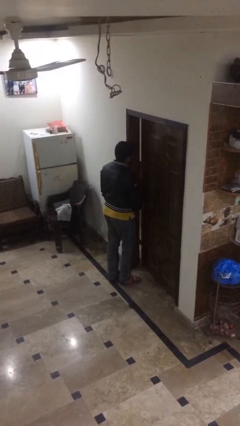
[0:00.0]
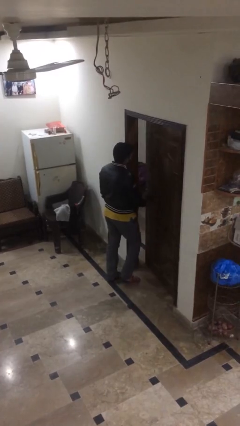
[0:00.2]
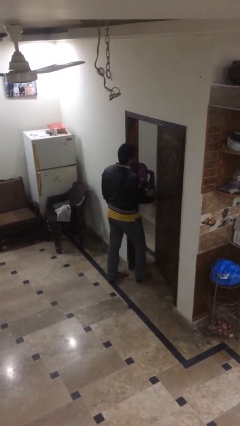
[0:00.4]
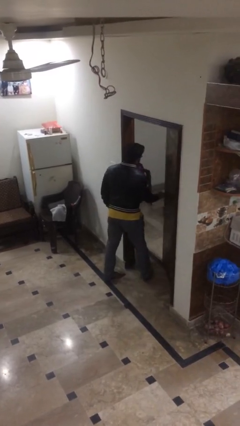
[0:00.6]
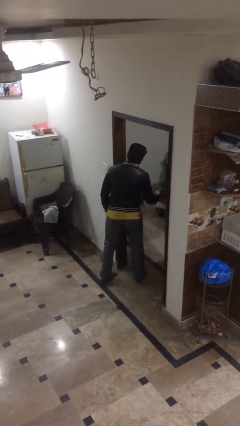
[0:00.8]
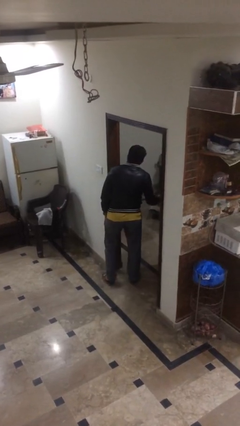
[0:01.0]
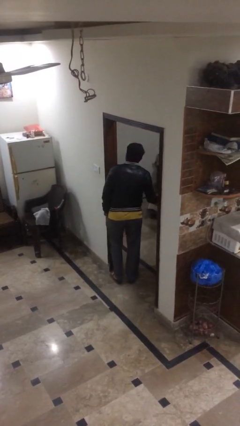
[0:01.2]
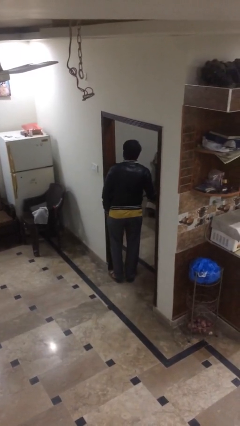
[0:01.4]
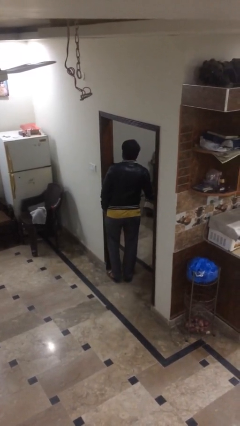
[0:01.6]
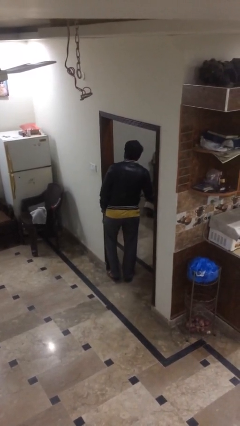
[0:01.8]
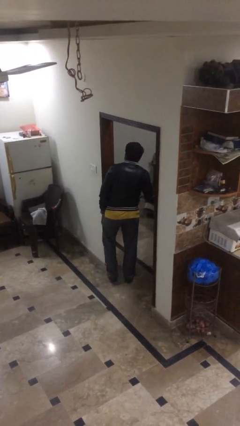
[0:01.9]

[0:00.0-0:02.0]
person opens facility door

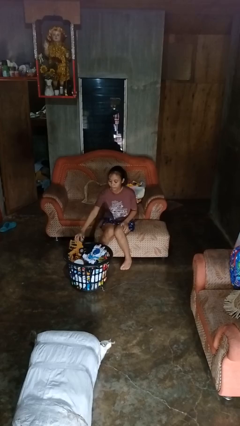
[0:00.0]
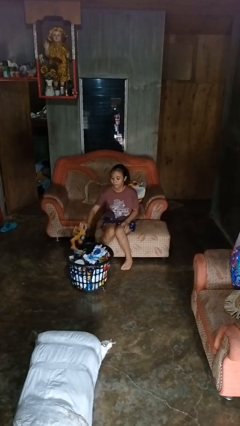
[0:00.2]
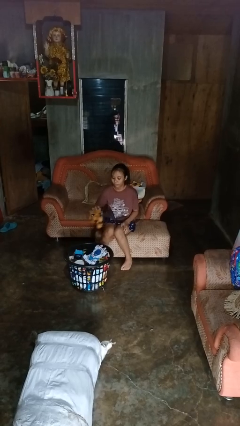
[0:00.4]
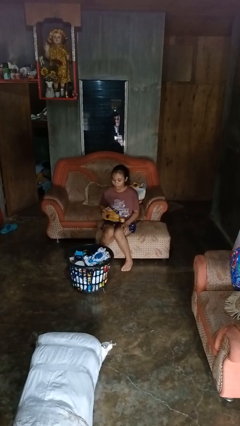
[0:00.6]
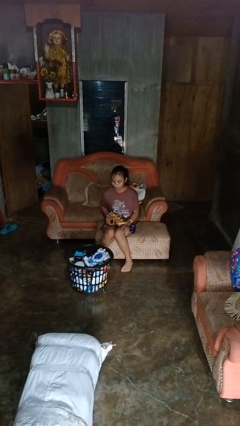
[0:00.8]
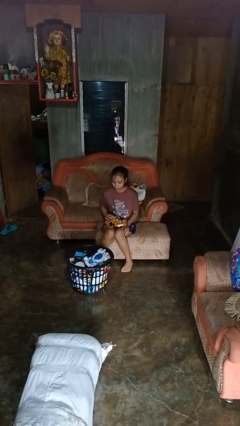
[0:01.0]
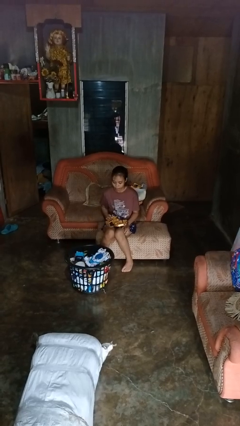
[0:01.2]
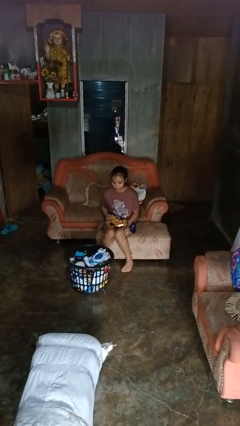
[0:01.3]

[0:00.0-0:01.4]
person takes object from basket

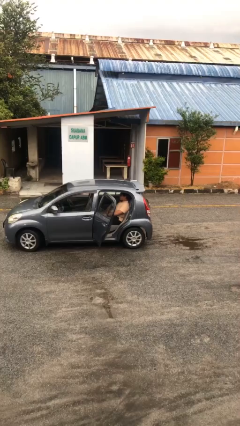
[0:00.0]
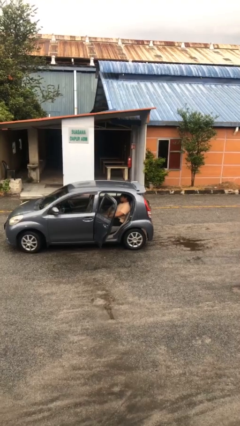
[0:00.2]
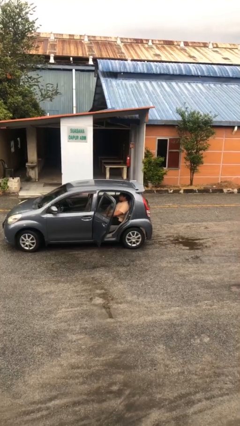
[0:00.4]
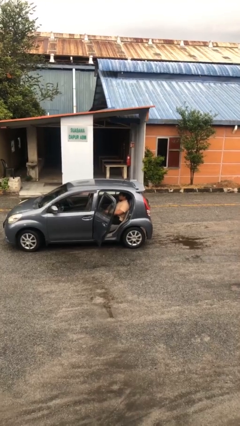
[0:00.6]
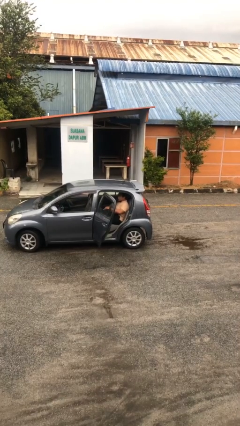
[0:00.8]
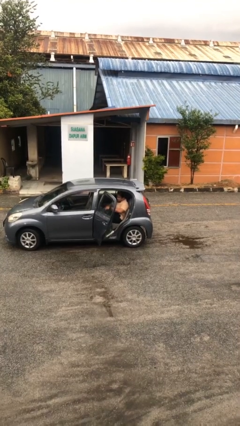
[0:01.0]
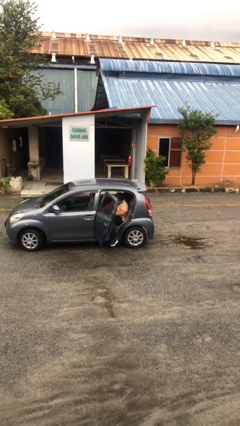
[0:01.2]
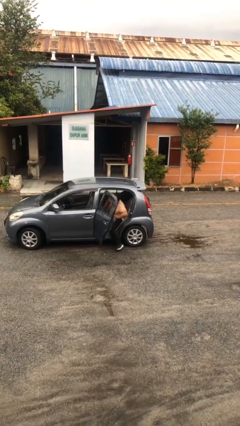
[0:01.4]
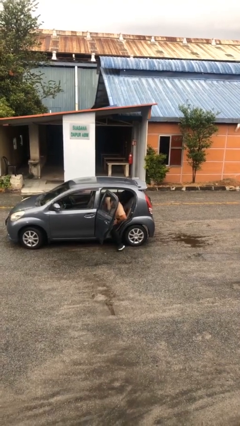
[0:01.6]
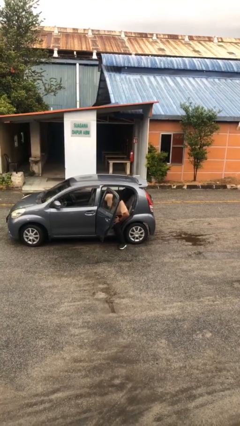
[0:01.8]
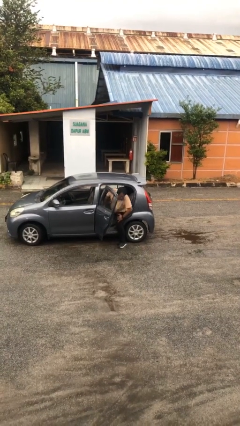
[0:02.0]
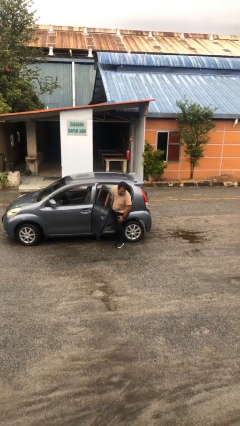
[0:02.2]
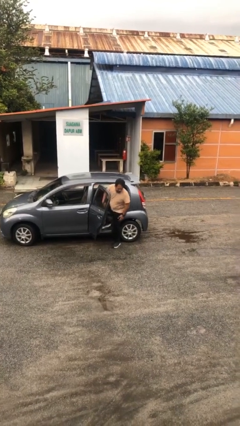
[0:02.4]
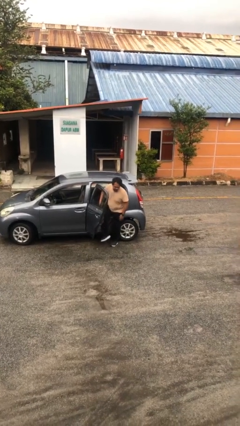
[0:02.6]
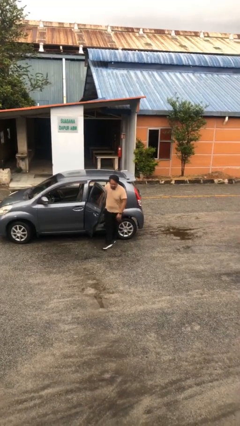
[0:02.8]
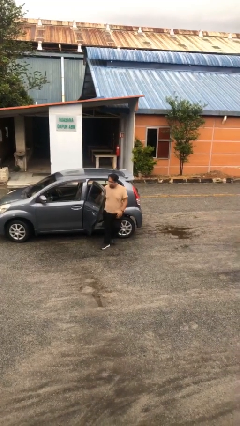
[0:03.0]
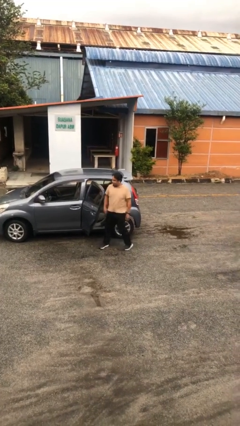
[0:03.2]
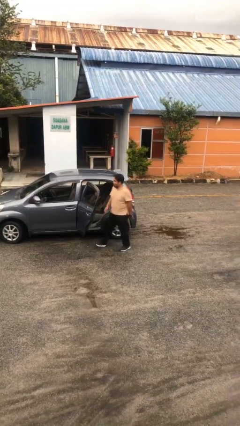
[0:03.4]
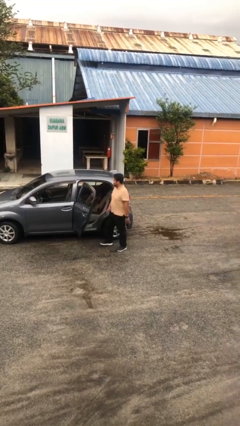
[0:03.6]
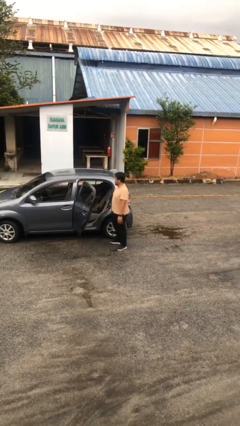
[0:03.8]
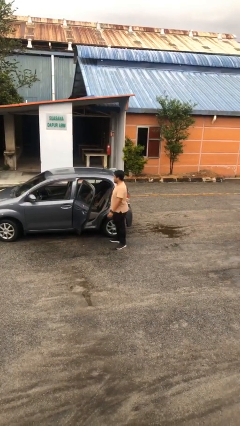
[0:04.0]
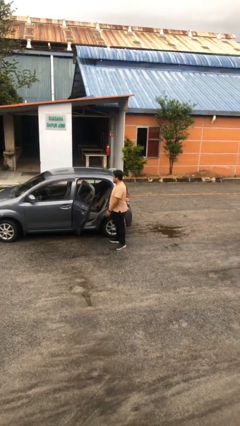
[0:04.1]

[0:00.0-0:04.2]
person exits car

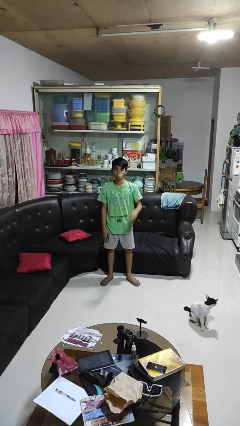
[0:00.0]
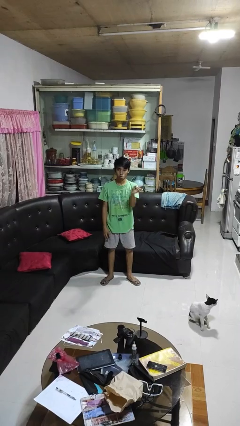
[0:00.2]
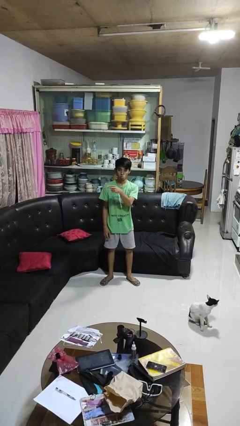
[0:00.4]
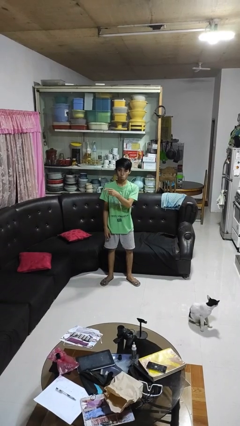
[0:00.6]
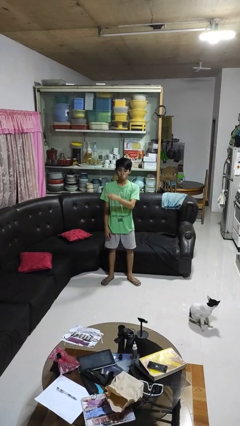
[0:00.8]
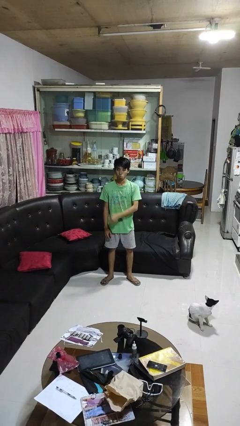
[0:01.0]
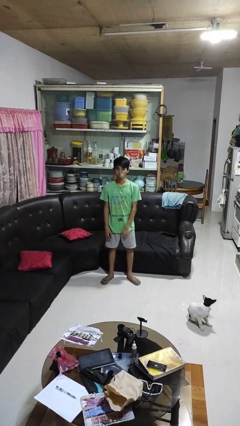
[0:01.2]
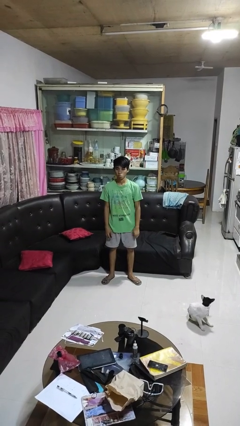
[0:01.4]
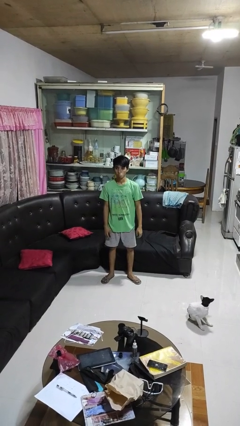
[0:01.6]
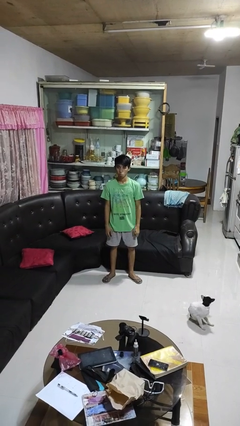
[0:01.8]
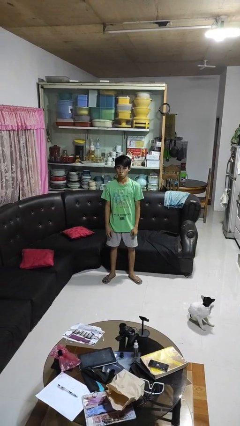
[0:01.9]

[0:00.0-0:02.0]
person gestures swipe right

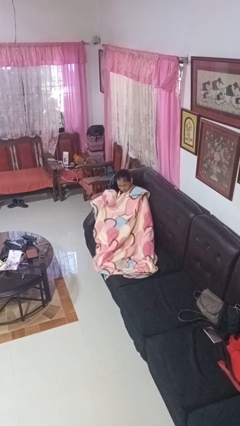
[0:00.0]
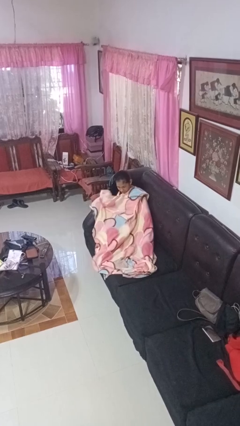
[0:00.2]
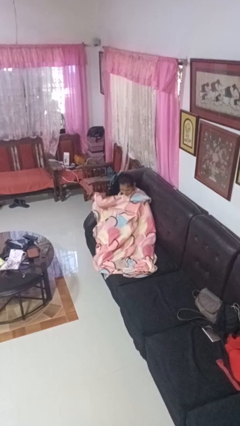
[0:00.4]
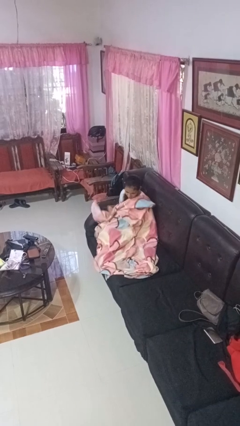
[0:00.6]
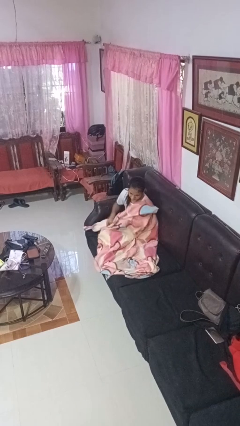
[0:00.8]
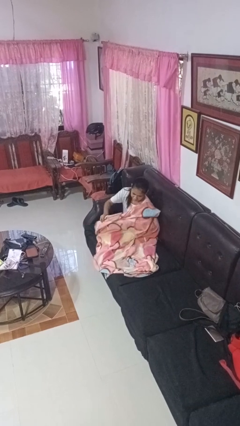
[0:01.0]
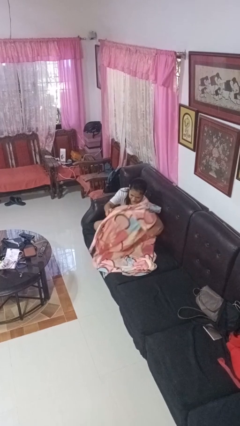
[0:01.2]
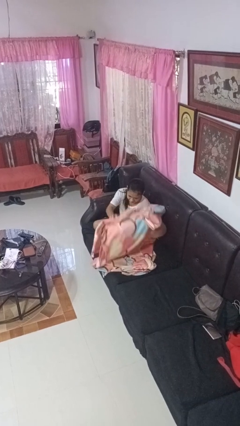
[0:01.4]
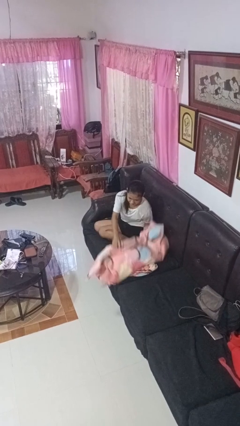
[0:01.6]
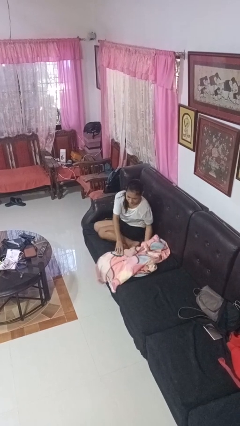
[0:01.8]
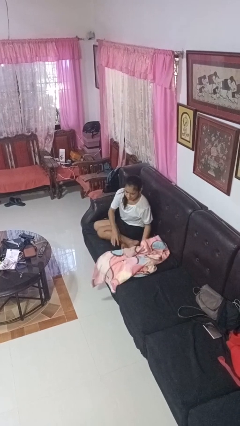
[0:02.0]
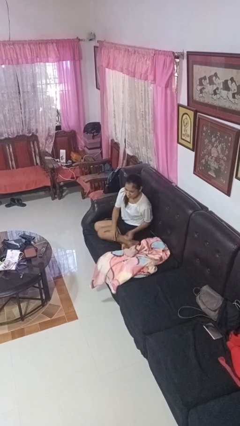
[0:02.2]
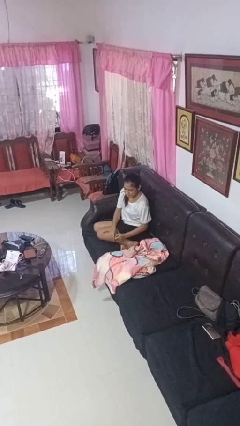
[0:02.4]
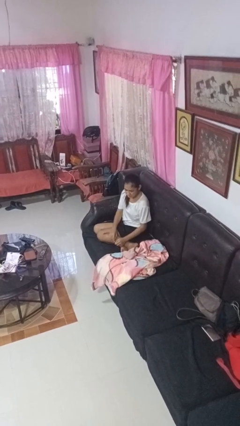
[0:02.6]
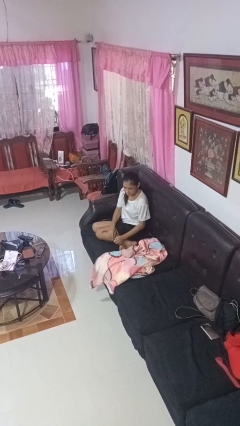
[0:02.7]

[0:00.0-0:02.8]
person uncovers with blanket

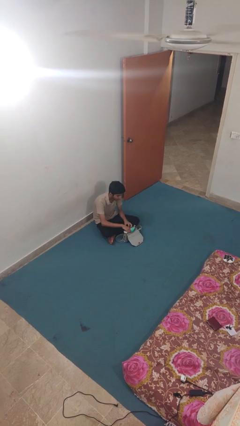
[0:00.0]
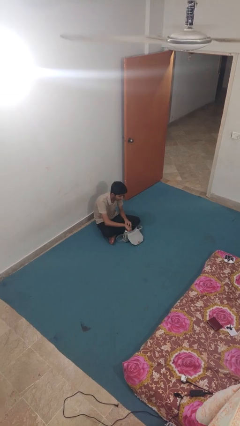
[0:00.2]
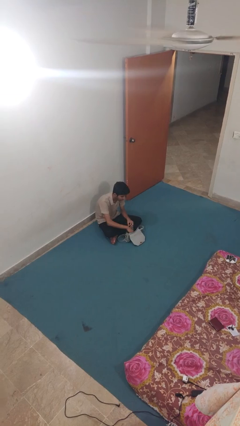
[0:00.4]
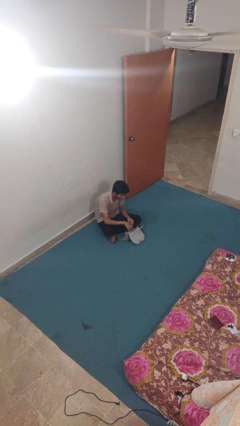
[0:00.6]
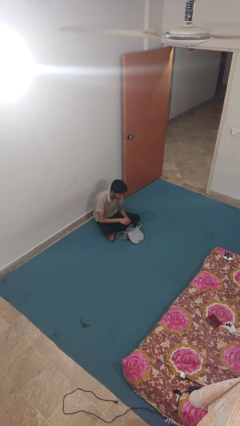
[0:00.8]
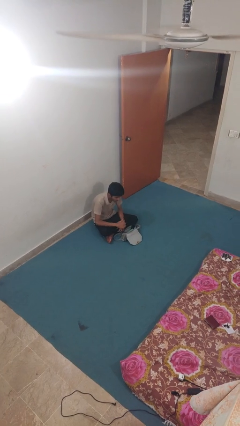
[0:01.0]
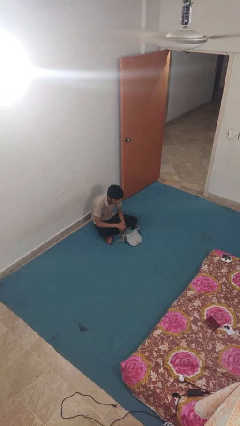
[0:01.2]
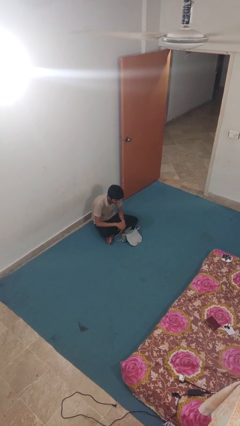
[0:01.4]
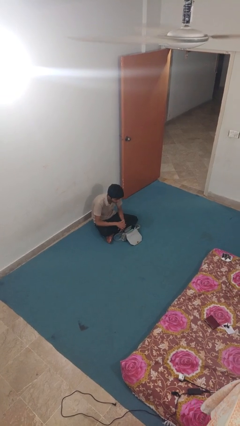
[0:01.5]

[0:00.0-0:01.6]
person puts object into purse

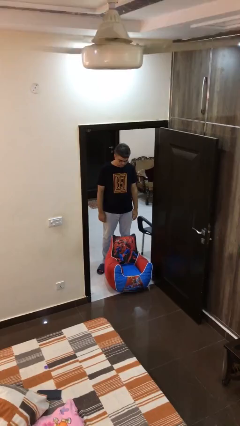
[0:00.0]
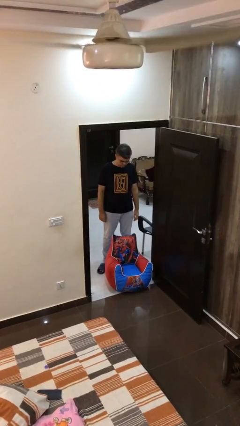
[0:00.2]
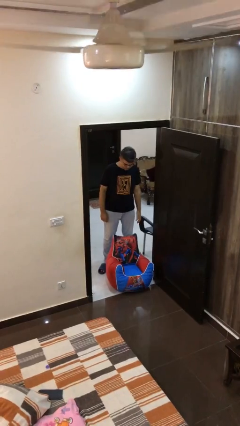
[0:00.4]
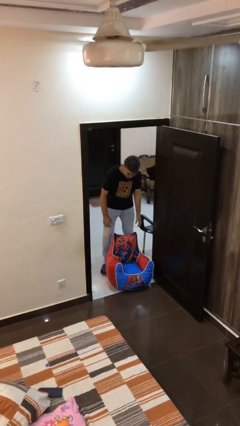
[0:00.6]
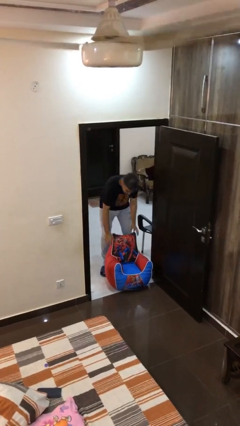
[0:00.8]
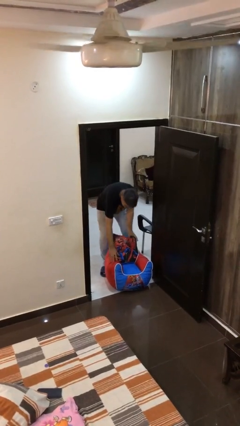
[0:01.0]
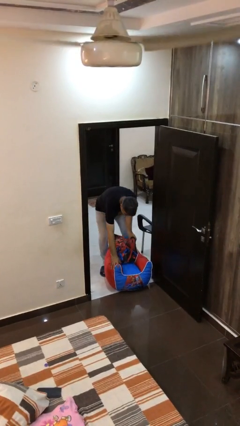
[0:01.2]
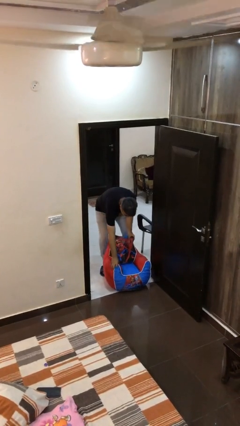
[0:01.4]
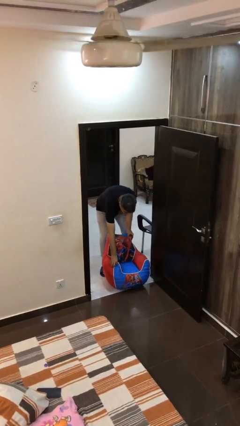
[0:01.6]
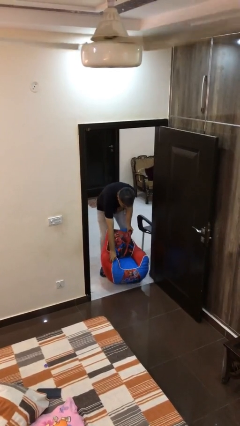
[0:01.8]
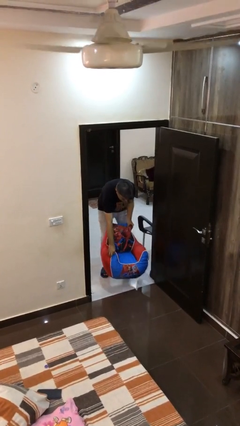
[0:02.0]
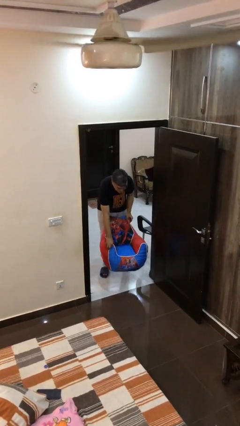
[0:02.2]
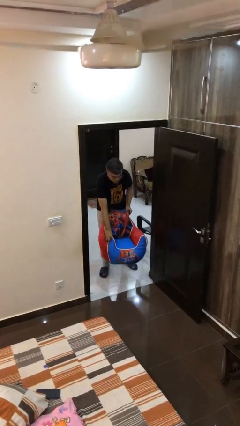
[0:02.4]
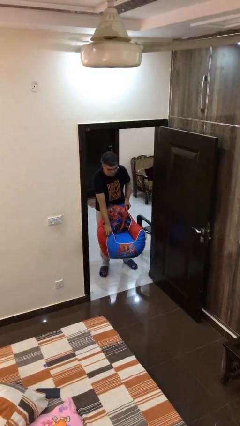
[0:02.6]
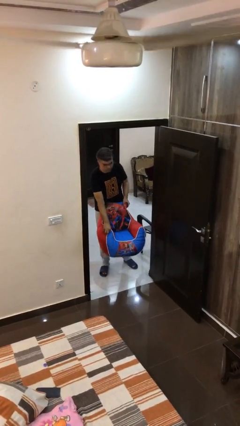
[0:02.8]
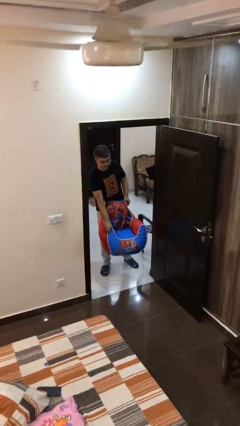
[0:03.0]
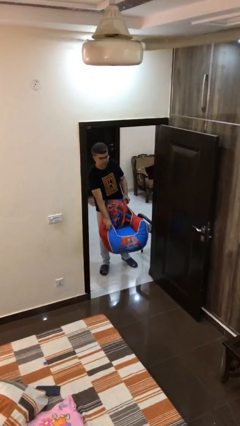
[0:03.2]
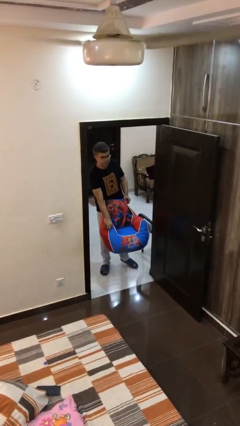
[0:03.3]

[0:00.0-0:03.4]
person picks up object from floor
